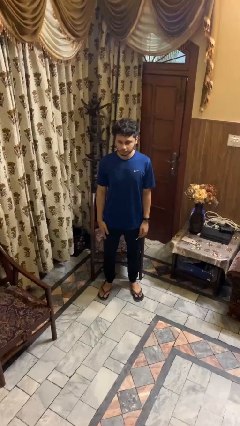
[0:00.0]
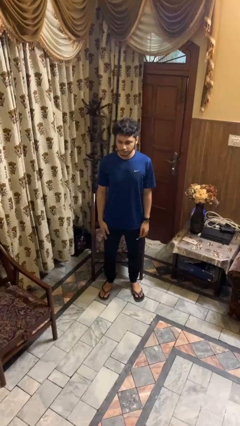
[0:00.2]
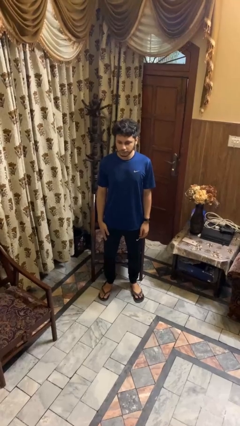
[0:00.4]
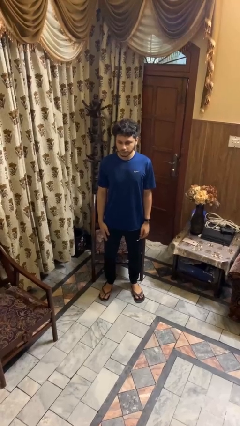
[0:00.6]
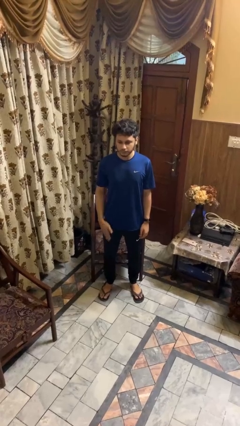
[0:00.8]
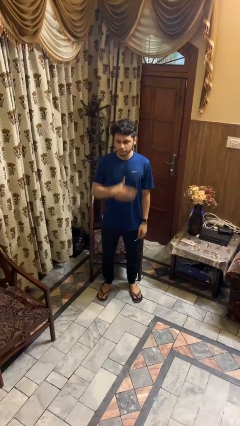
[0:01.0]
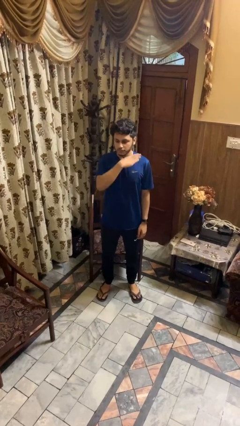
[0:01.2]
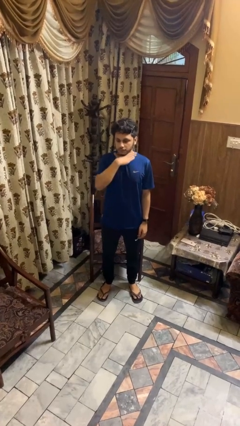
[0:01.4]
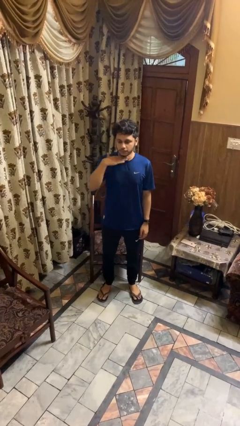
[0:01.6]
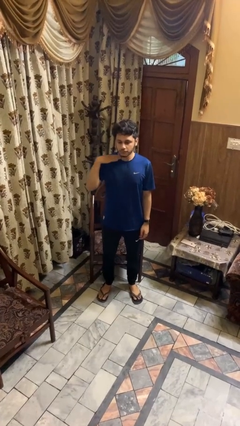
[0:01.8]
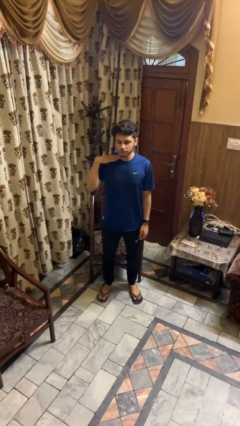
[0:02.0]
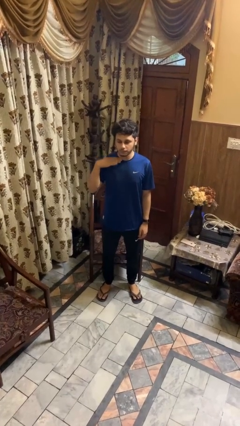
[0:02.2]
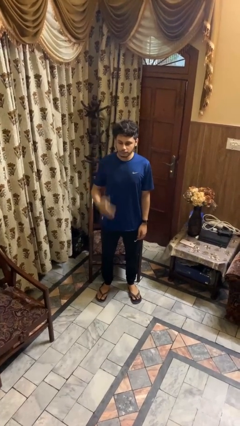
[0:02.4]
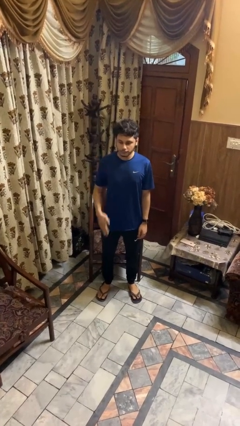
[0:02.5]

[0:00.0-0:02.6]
person gestures cut

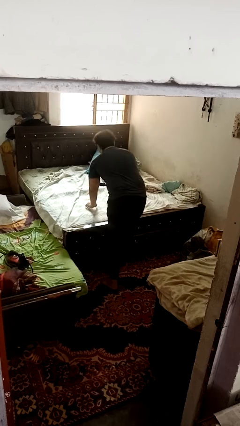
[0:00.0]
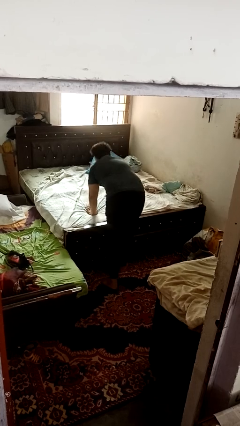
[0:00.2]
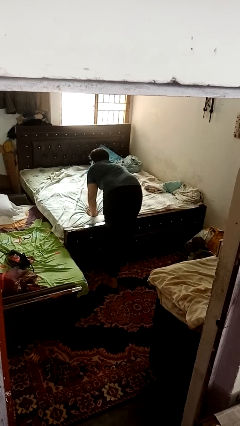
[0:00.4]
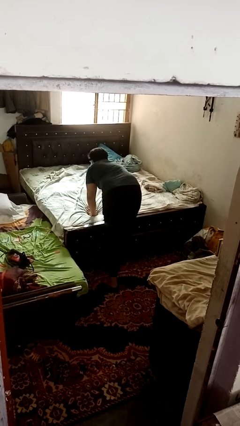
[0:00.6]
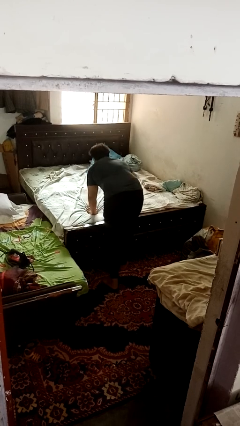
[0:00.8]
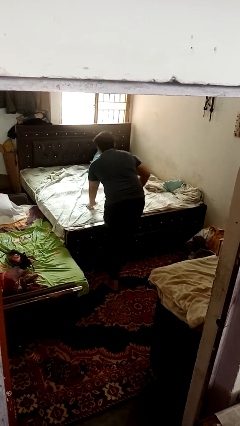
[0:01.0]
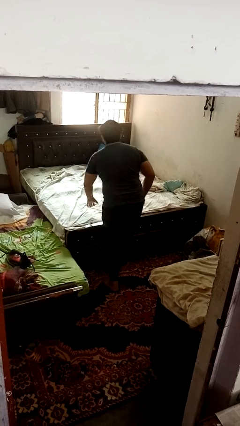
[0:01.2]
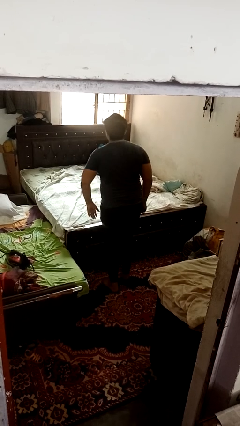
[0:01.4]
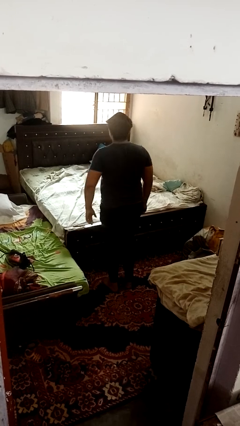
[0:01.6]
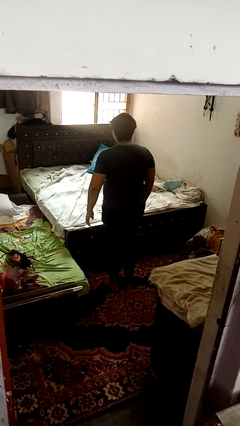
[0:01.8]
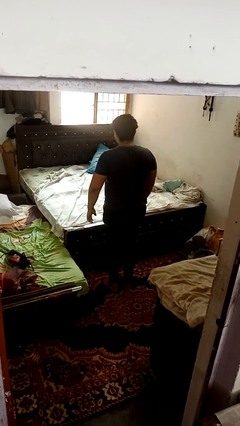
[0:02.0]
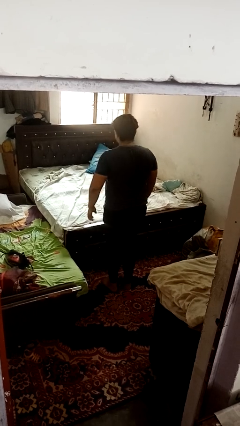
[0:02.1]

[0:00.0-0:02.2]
person picks up object from bed

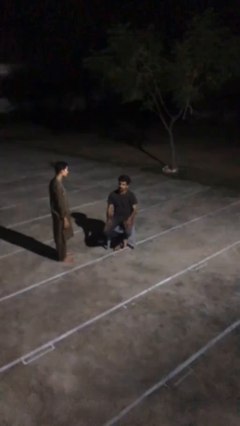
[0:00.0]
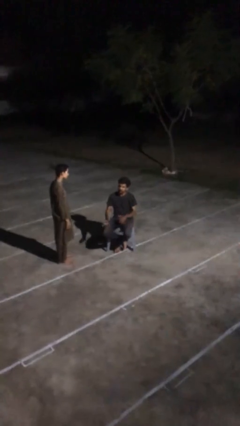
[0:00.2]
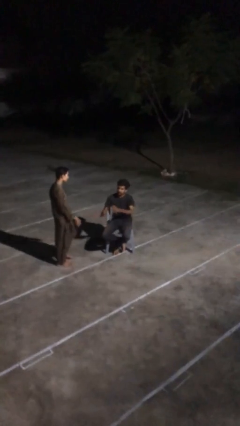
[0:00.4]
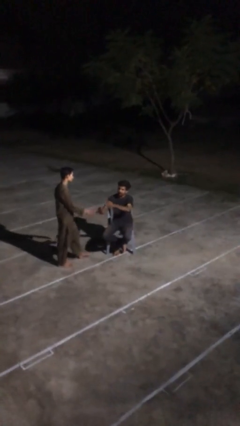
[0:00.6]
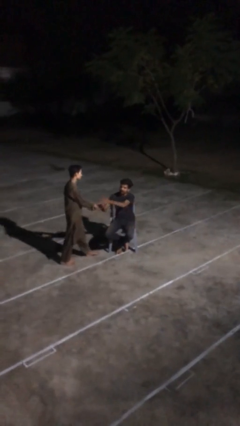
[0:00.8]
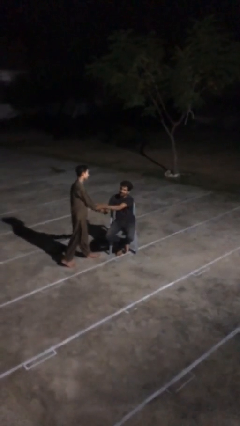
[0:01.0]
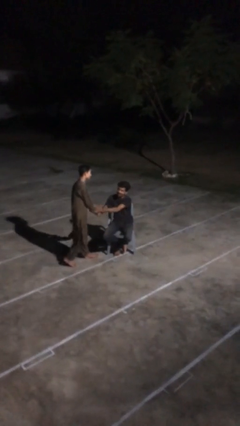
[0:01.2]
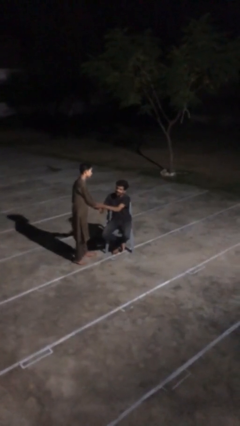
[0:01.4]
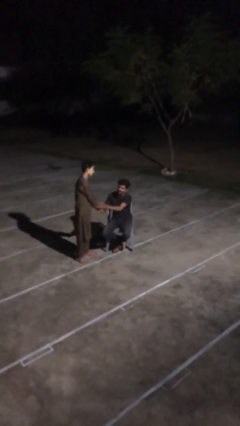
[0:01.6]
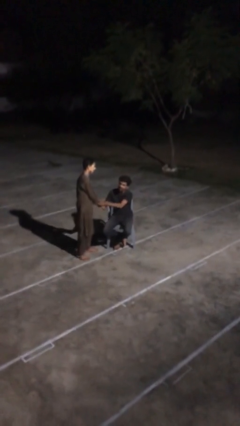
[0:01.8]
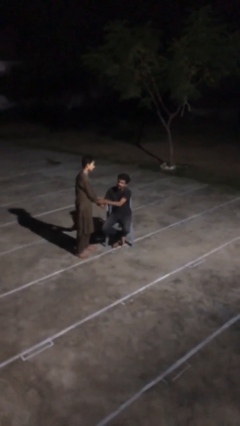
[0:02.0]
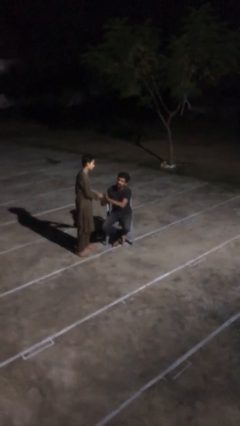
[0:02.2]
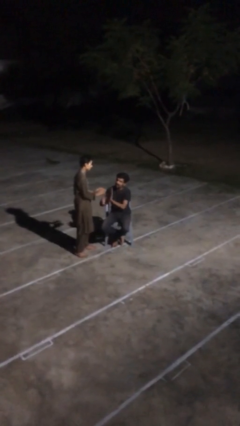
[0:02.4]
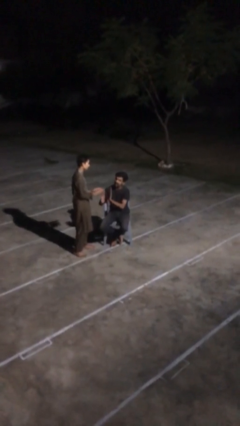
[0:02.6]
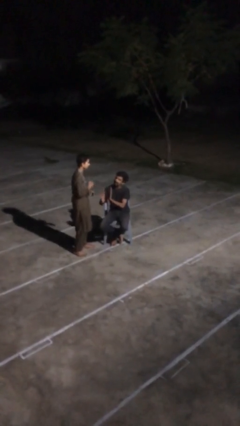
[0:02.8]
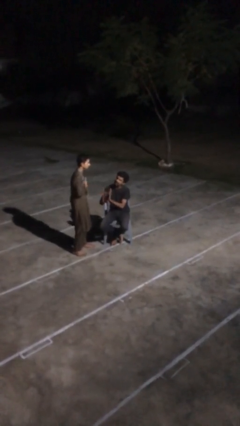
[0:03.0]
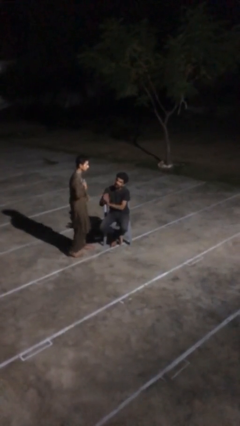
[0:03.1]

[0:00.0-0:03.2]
person shakes hand

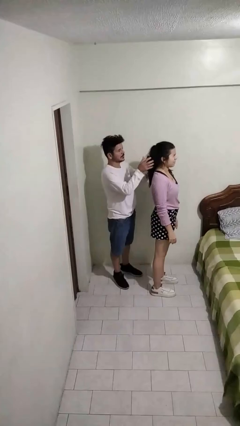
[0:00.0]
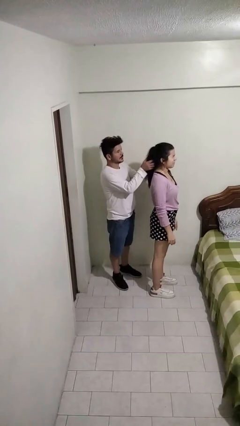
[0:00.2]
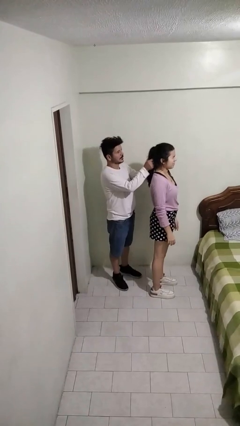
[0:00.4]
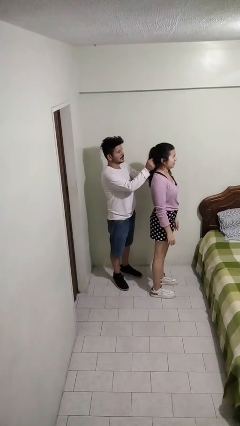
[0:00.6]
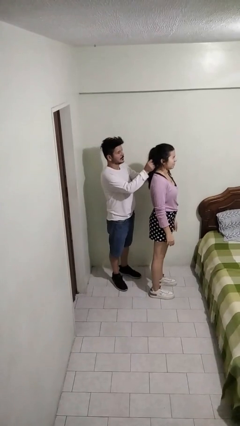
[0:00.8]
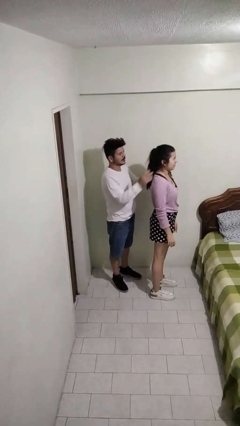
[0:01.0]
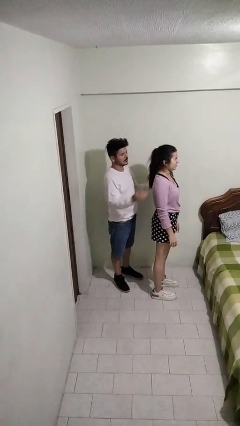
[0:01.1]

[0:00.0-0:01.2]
person grabs person by hair

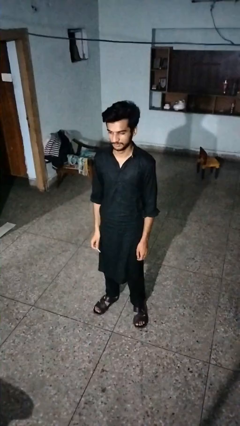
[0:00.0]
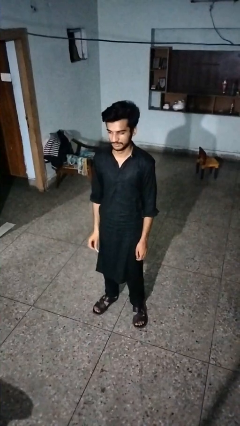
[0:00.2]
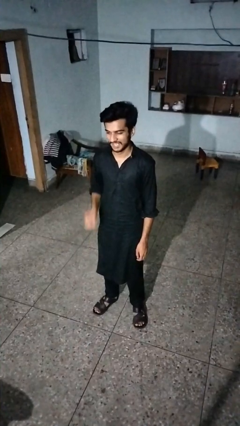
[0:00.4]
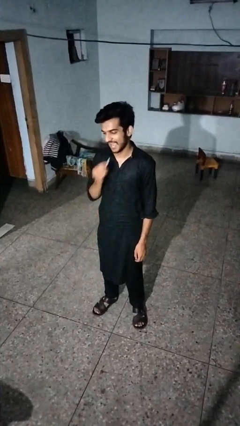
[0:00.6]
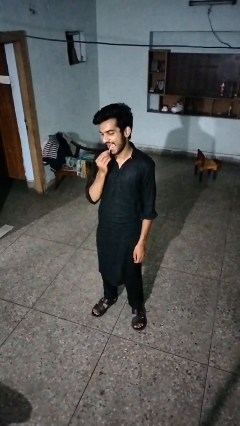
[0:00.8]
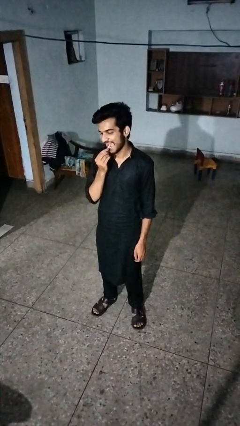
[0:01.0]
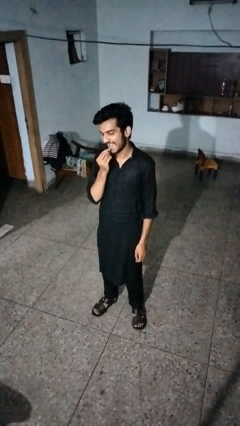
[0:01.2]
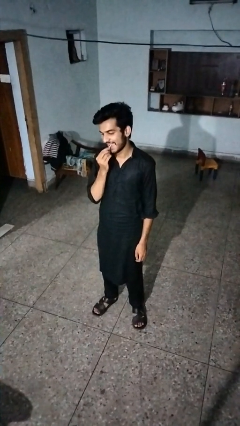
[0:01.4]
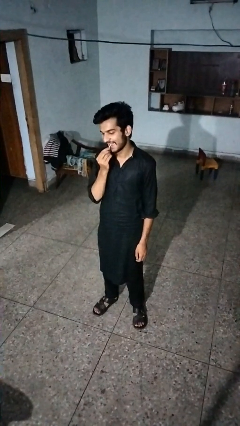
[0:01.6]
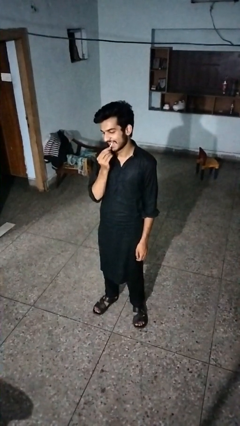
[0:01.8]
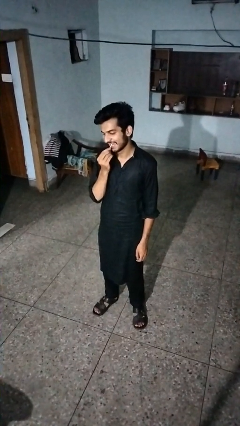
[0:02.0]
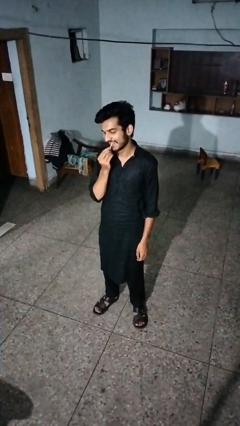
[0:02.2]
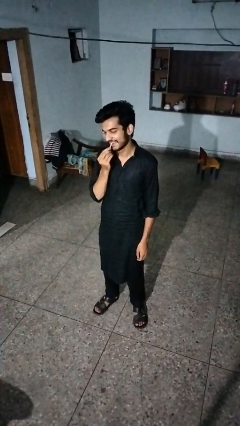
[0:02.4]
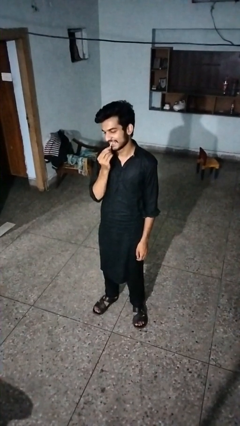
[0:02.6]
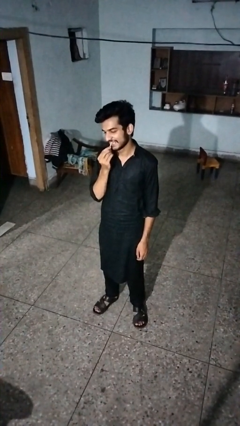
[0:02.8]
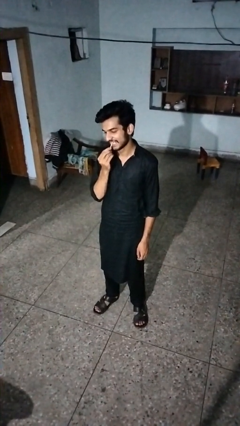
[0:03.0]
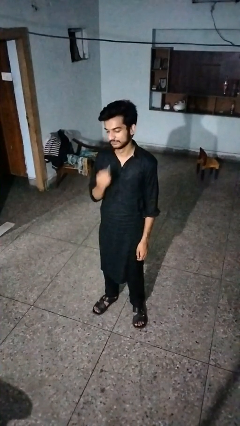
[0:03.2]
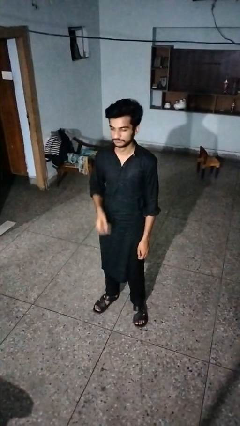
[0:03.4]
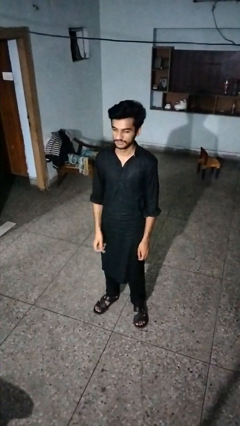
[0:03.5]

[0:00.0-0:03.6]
person flosses

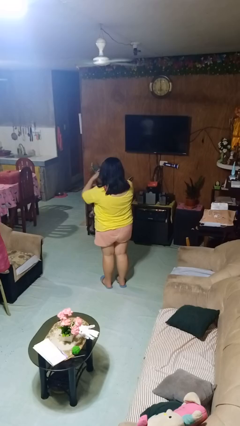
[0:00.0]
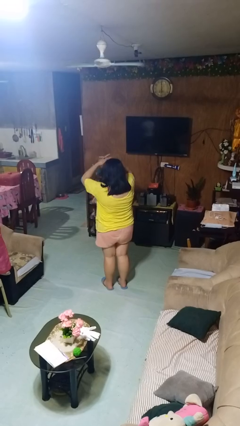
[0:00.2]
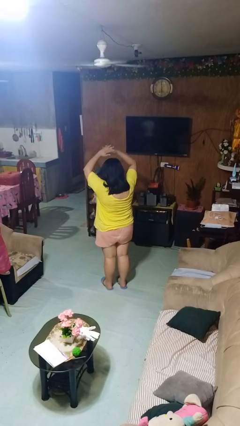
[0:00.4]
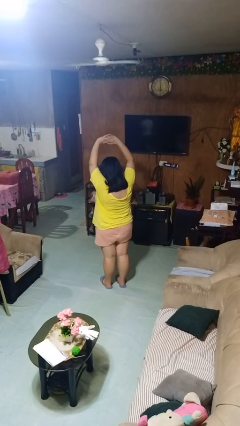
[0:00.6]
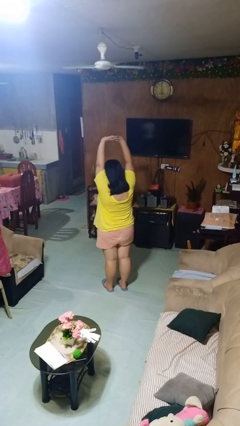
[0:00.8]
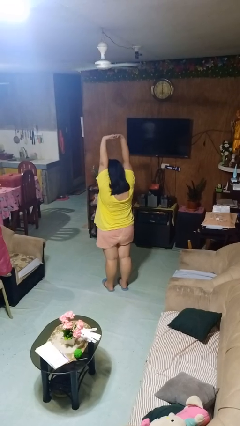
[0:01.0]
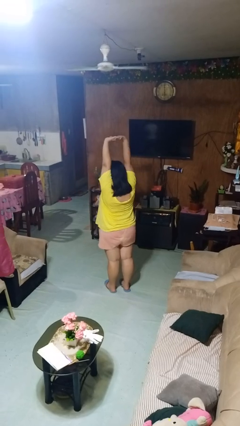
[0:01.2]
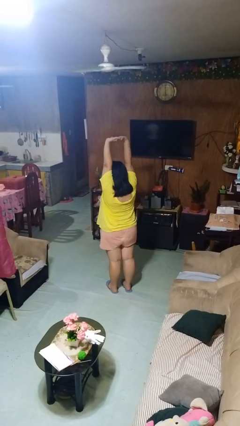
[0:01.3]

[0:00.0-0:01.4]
person stretches arms over head

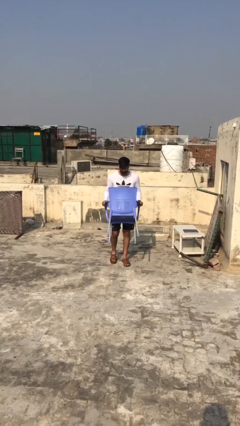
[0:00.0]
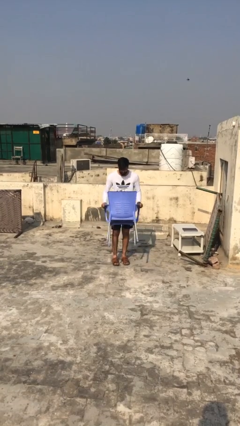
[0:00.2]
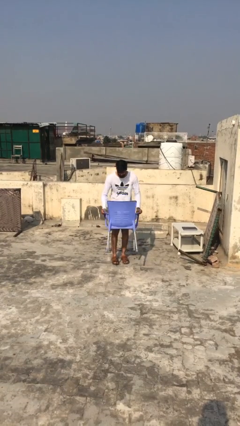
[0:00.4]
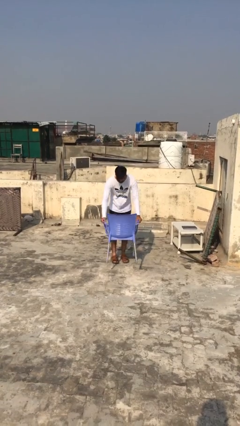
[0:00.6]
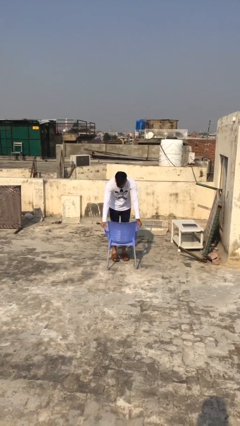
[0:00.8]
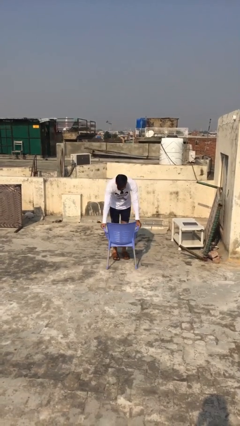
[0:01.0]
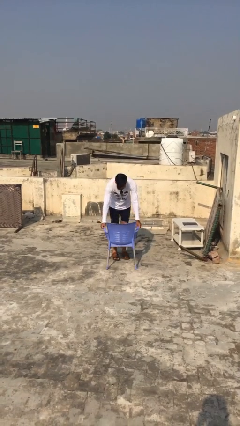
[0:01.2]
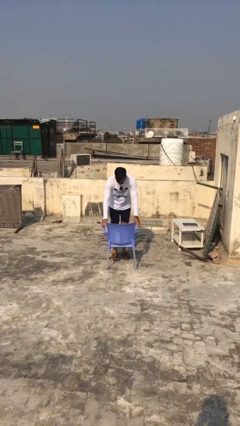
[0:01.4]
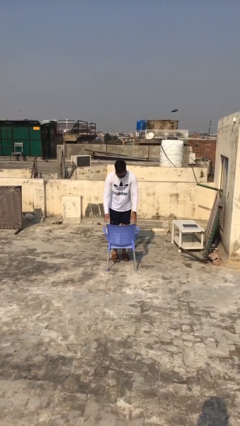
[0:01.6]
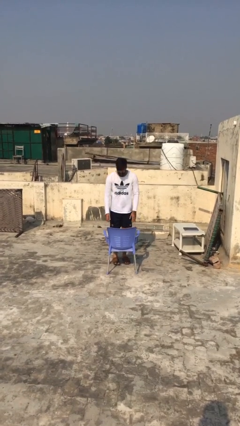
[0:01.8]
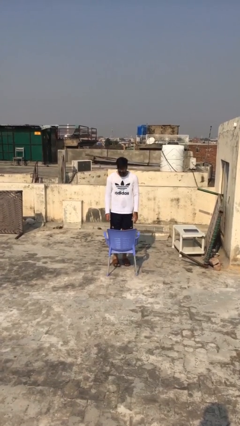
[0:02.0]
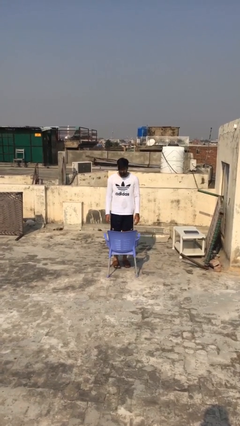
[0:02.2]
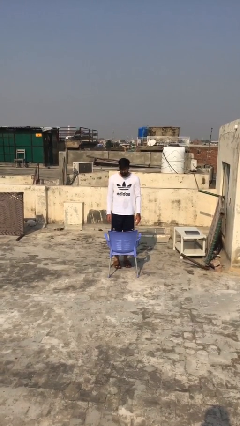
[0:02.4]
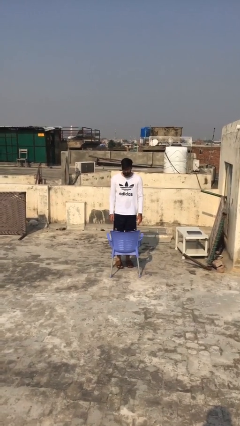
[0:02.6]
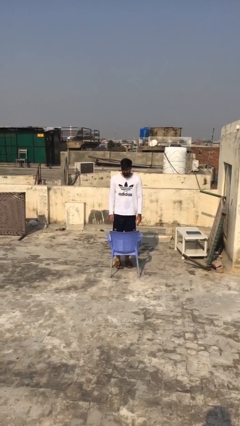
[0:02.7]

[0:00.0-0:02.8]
person puts down object on floor
